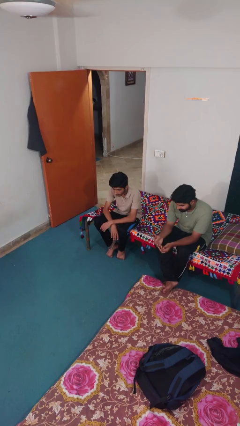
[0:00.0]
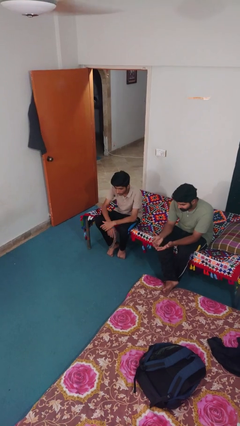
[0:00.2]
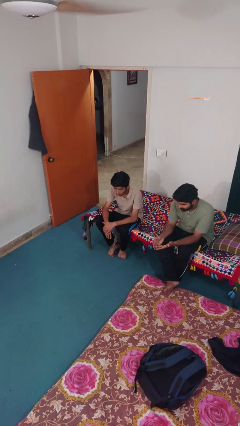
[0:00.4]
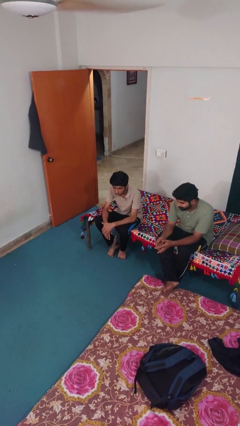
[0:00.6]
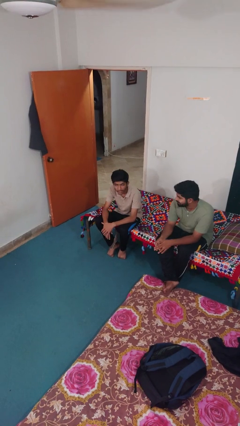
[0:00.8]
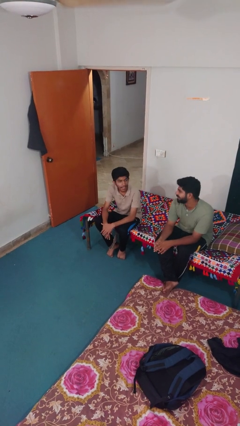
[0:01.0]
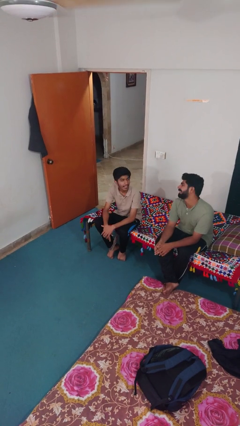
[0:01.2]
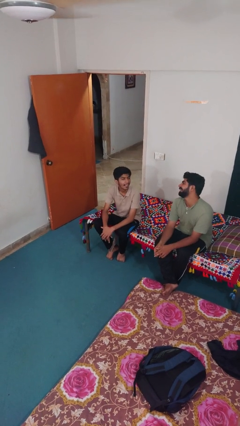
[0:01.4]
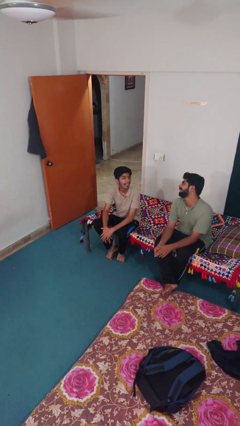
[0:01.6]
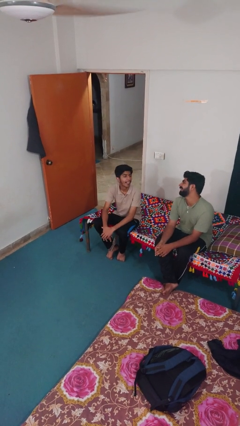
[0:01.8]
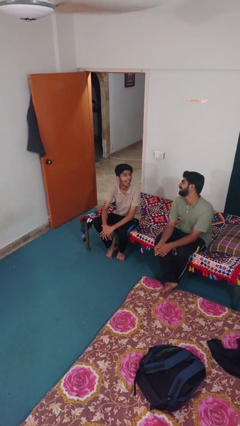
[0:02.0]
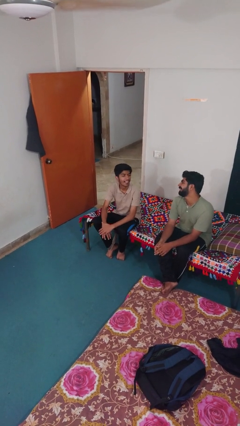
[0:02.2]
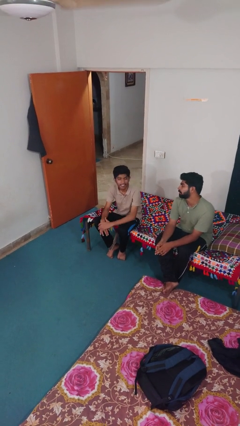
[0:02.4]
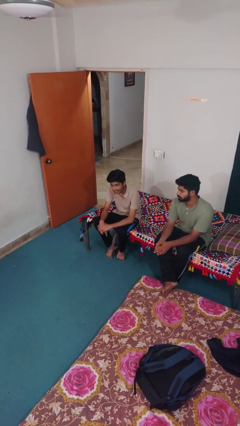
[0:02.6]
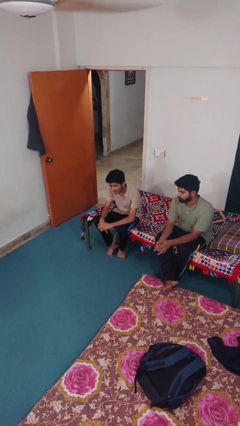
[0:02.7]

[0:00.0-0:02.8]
person laughs with person

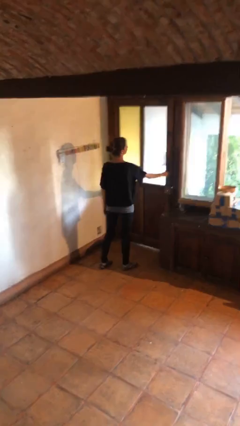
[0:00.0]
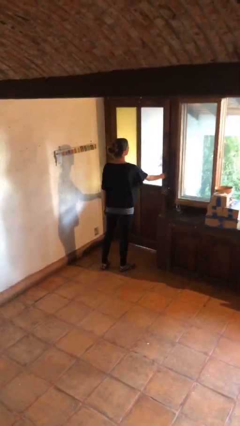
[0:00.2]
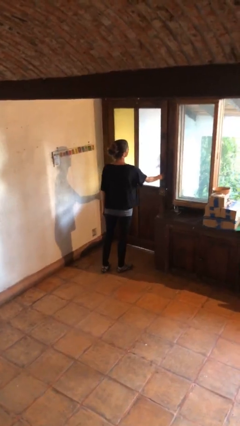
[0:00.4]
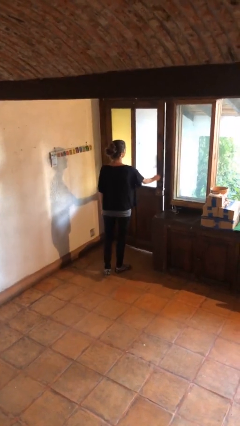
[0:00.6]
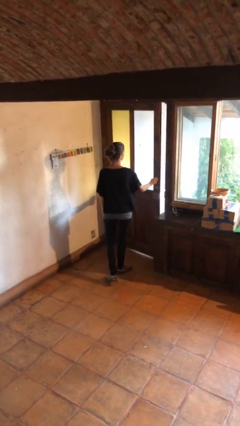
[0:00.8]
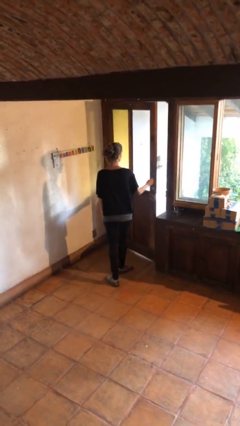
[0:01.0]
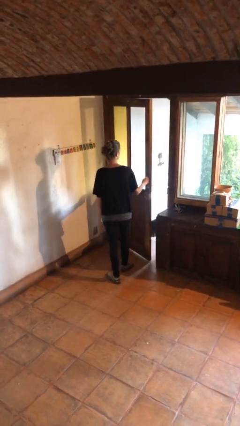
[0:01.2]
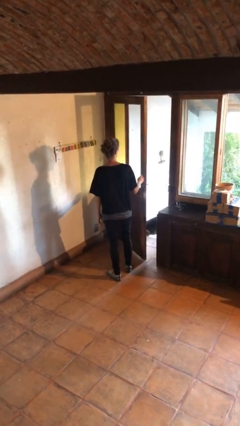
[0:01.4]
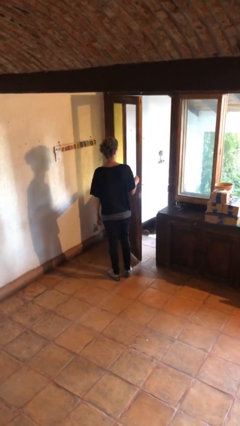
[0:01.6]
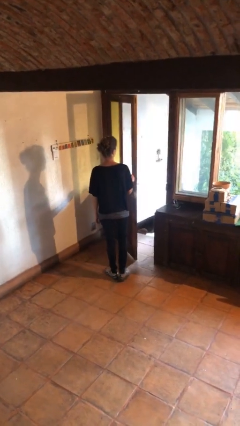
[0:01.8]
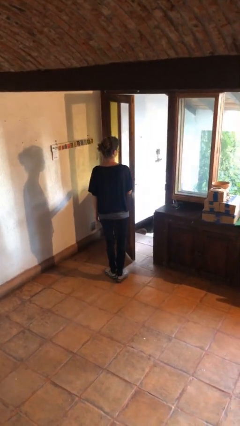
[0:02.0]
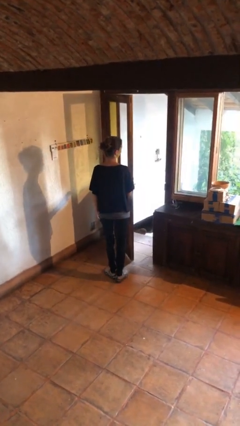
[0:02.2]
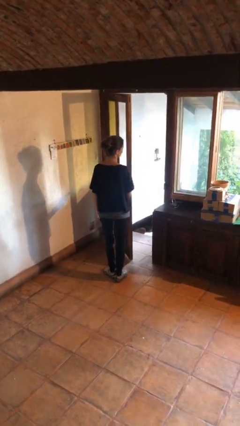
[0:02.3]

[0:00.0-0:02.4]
person opens facility door

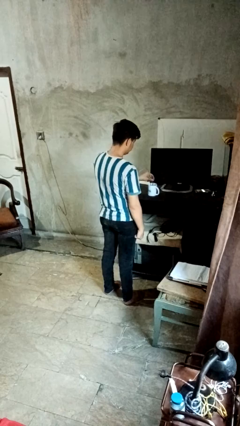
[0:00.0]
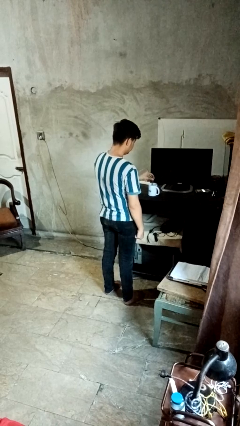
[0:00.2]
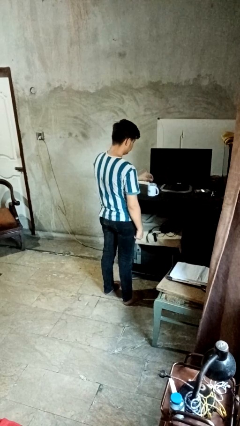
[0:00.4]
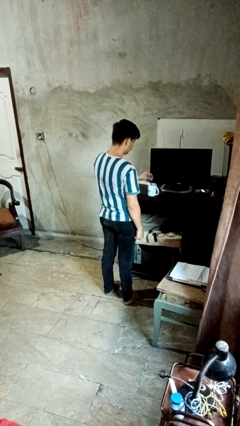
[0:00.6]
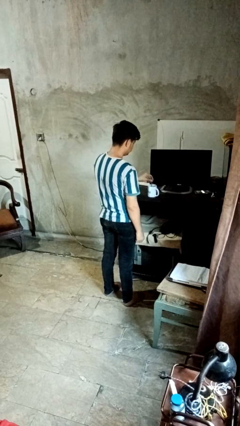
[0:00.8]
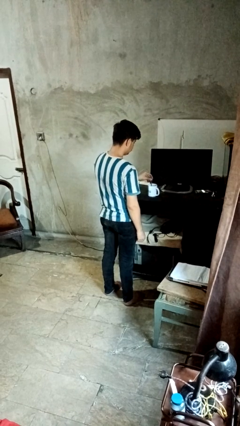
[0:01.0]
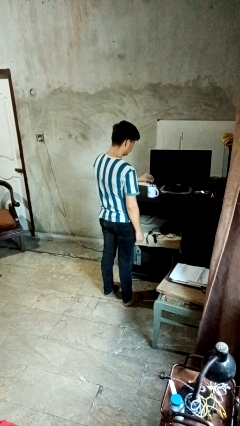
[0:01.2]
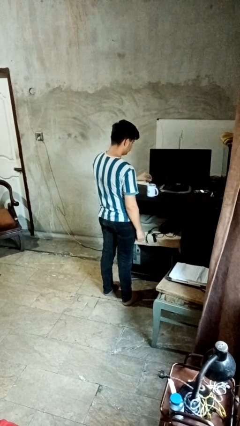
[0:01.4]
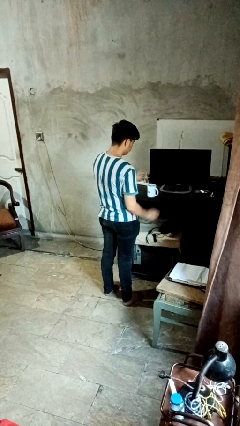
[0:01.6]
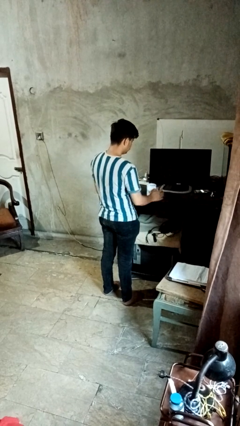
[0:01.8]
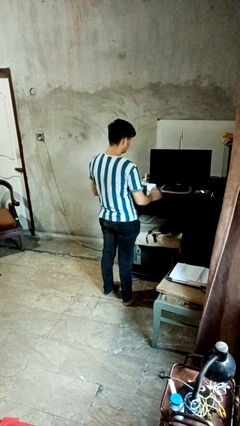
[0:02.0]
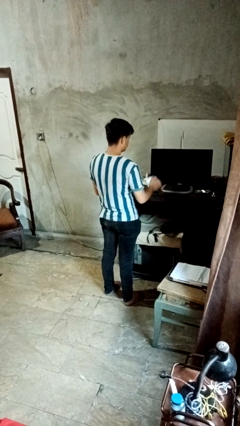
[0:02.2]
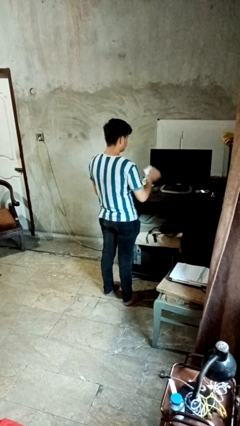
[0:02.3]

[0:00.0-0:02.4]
person stirs mug

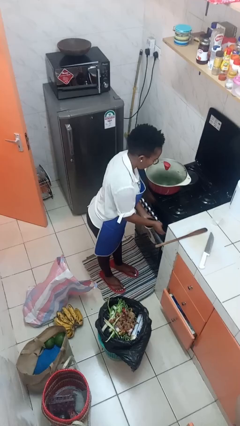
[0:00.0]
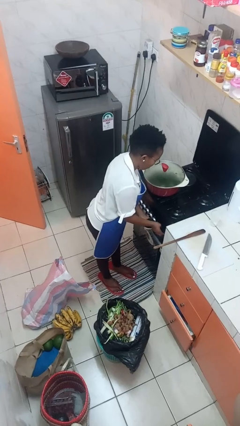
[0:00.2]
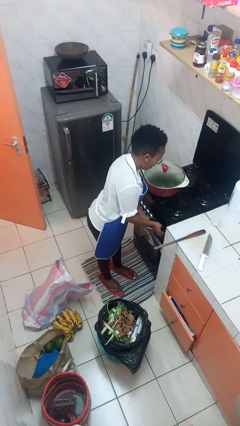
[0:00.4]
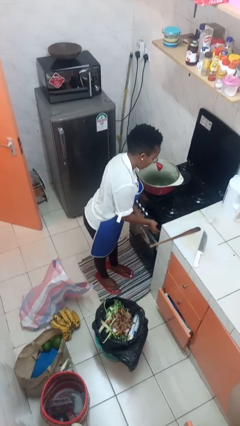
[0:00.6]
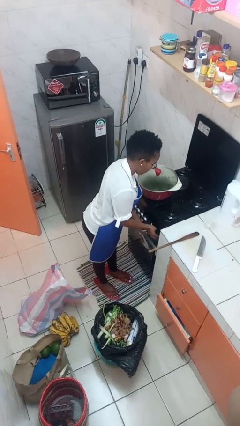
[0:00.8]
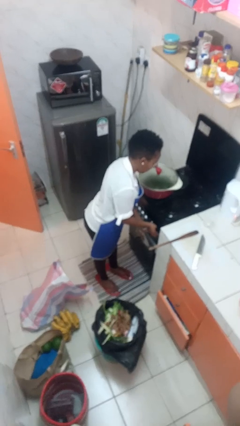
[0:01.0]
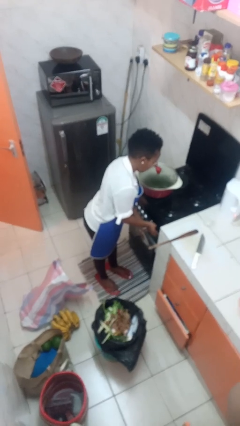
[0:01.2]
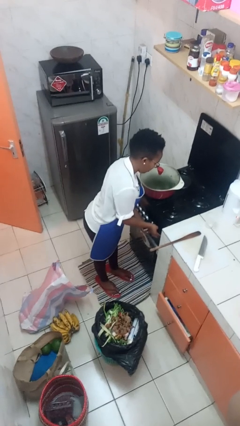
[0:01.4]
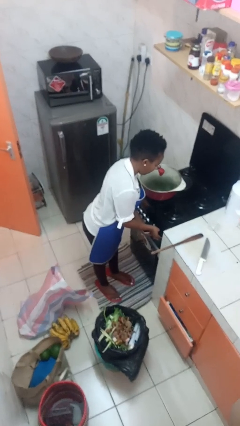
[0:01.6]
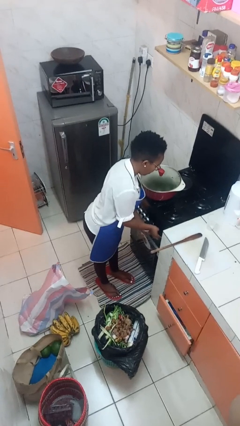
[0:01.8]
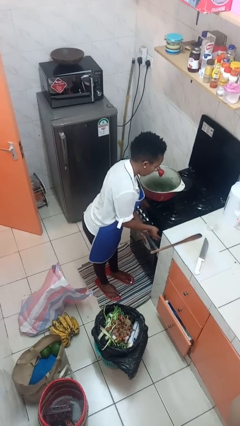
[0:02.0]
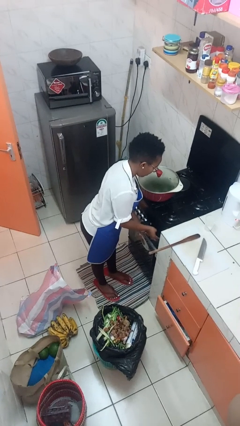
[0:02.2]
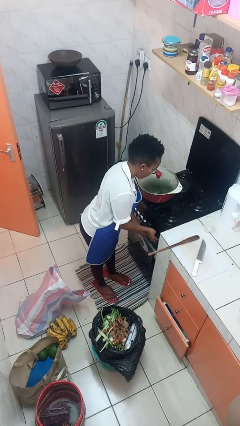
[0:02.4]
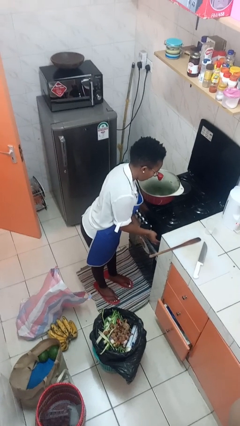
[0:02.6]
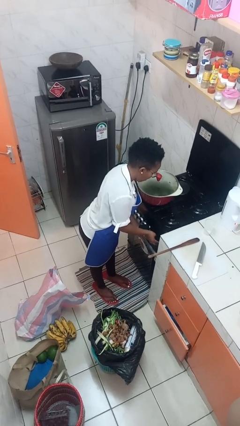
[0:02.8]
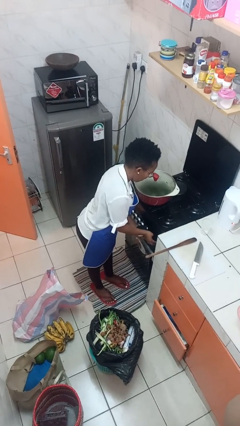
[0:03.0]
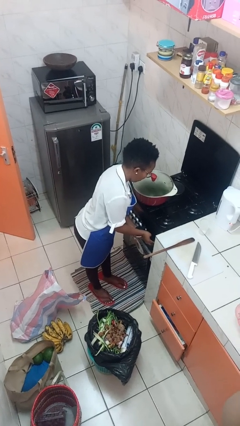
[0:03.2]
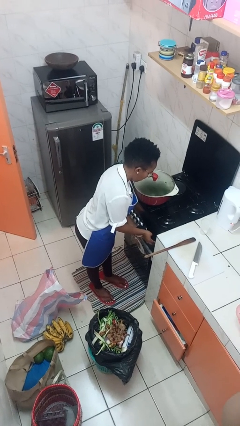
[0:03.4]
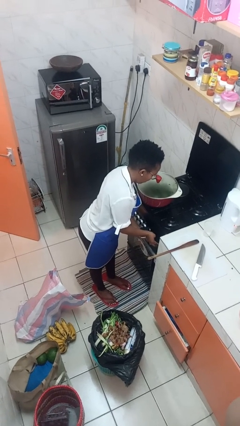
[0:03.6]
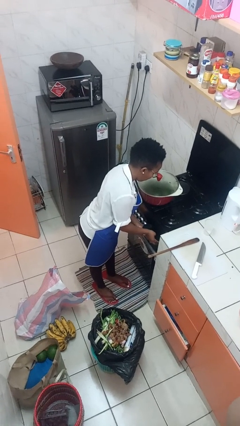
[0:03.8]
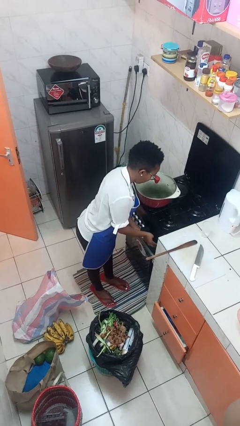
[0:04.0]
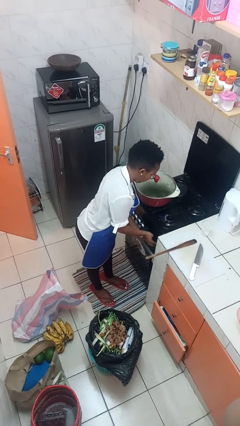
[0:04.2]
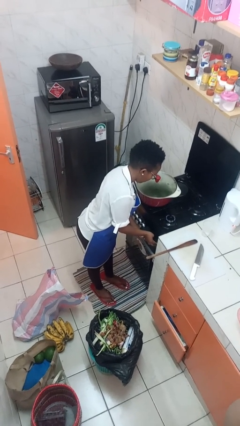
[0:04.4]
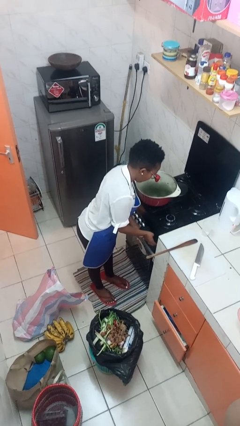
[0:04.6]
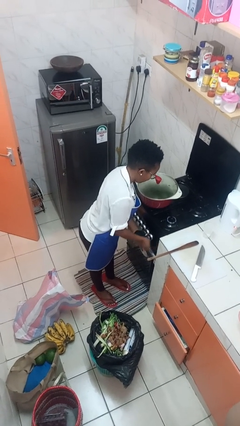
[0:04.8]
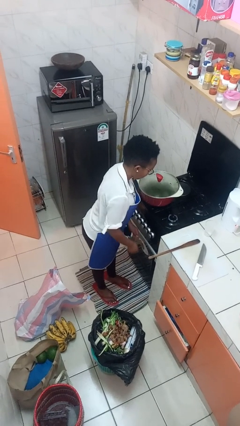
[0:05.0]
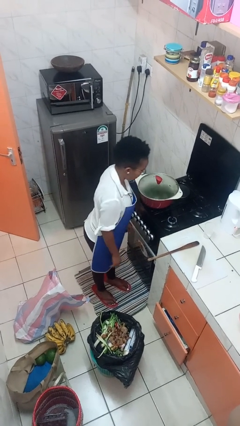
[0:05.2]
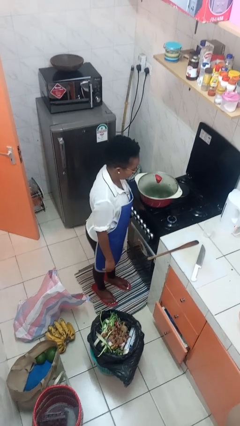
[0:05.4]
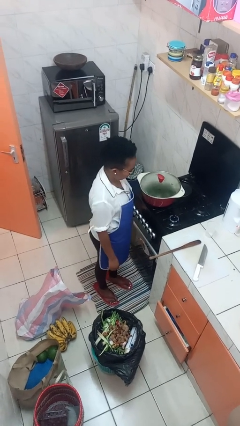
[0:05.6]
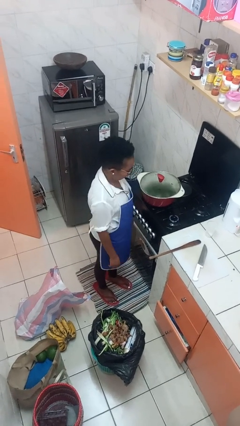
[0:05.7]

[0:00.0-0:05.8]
person turns on stovetop

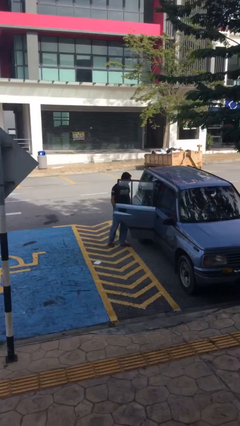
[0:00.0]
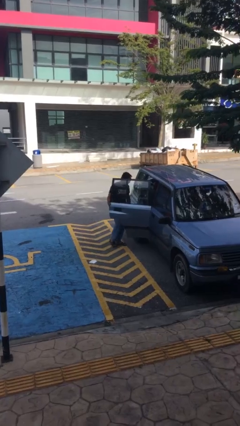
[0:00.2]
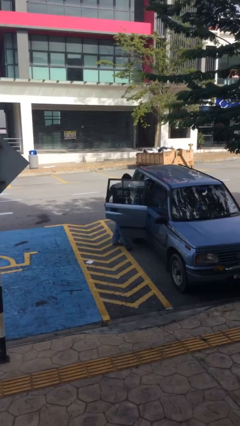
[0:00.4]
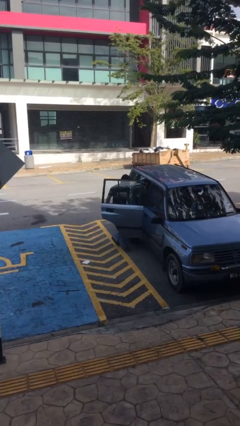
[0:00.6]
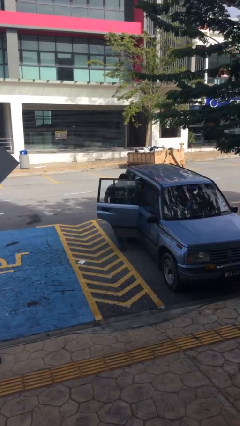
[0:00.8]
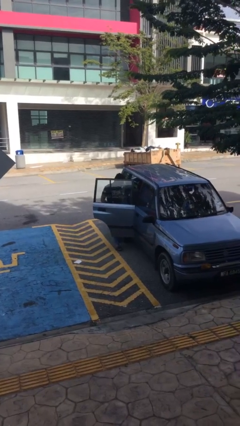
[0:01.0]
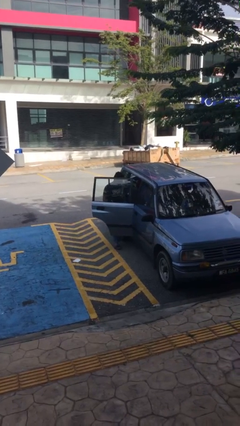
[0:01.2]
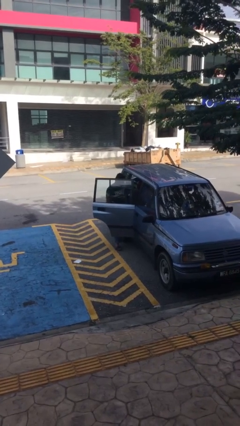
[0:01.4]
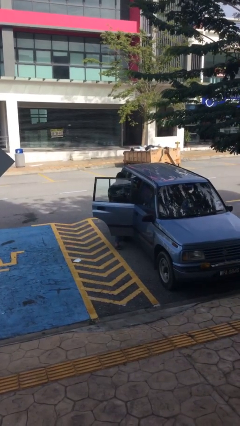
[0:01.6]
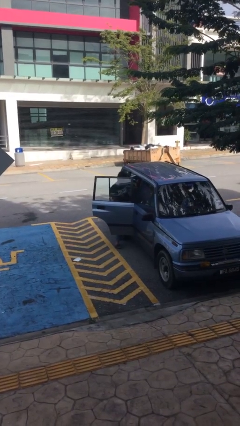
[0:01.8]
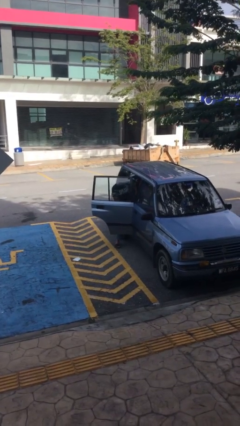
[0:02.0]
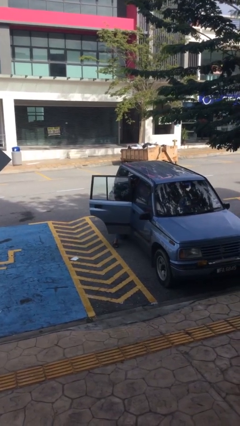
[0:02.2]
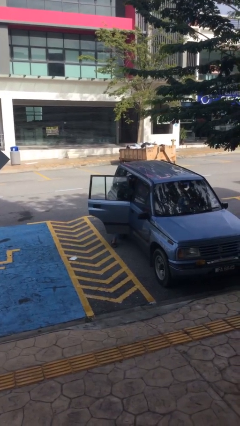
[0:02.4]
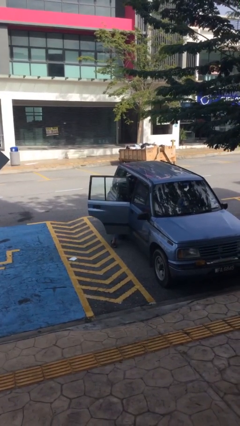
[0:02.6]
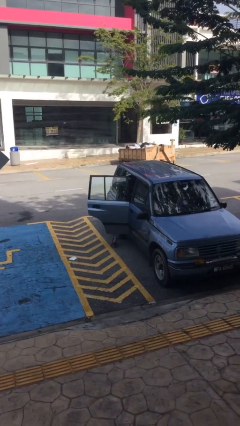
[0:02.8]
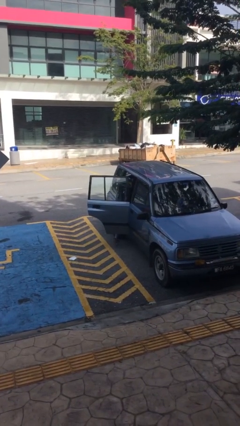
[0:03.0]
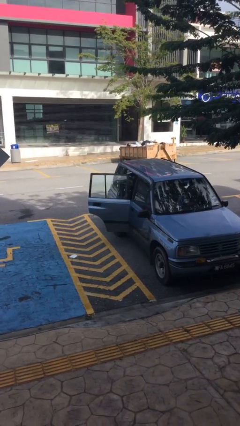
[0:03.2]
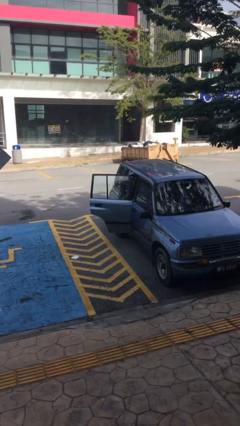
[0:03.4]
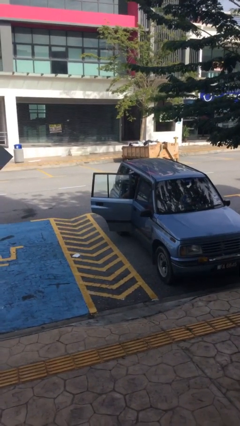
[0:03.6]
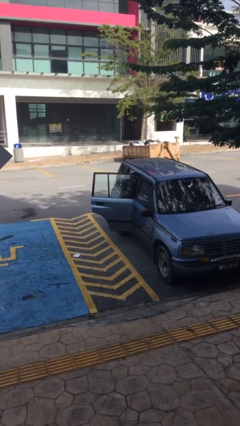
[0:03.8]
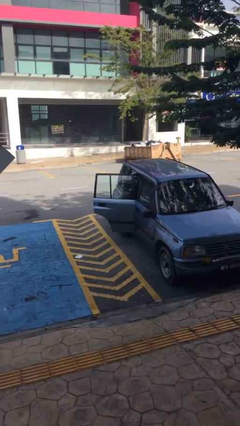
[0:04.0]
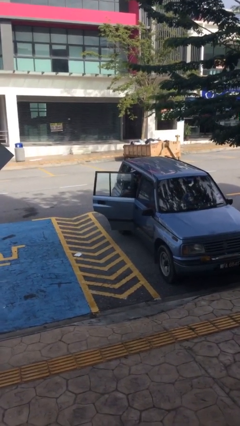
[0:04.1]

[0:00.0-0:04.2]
person enters car

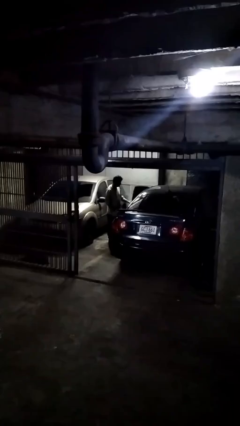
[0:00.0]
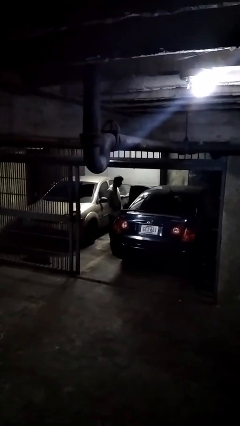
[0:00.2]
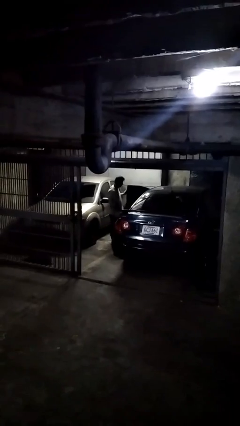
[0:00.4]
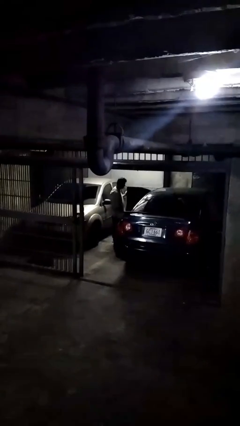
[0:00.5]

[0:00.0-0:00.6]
person opens car door
